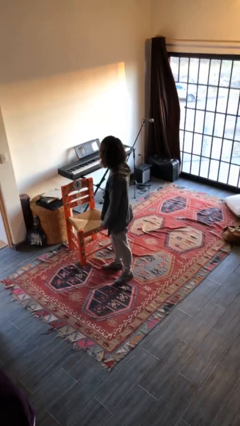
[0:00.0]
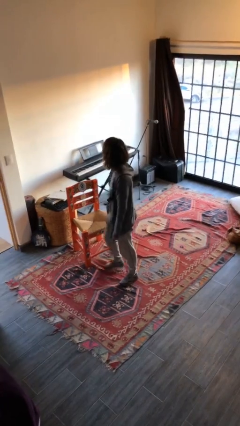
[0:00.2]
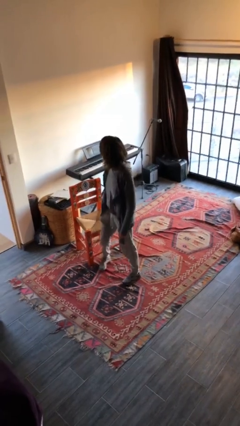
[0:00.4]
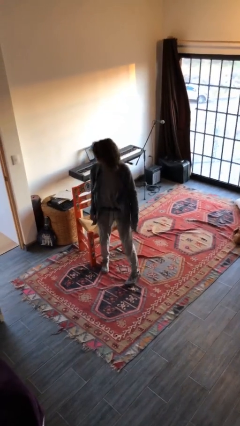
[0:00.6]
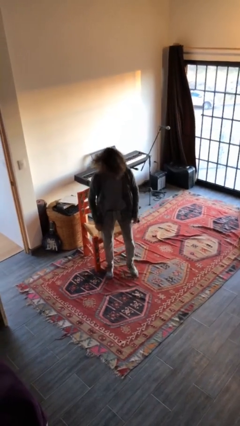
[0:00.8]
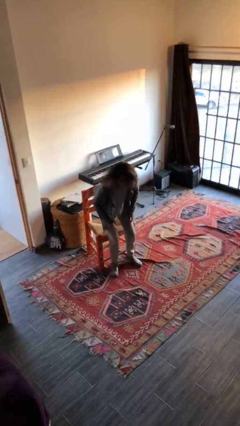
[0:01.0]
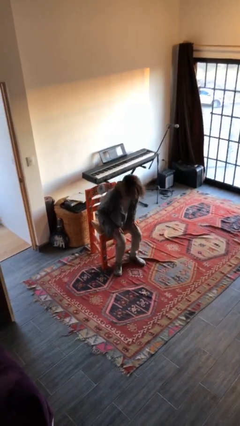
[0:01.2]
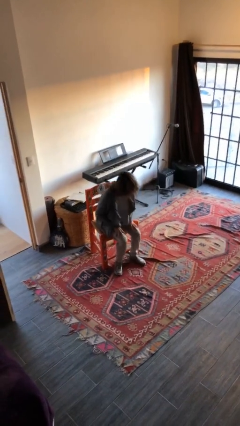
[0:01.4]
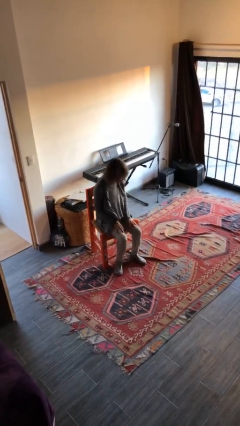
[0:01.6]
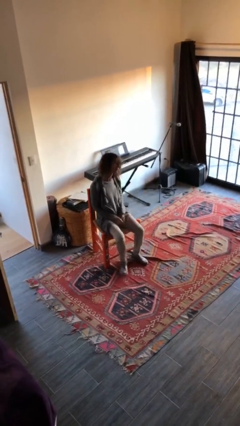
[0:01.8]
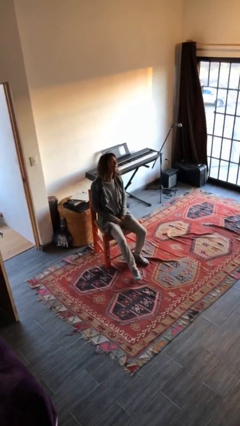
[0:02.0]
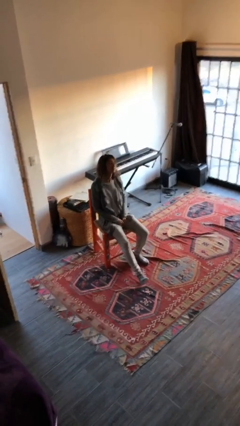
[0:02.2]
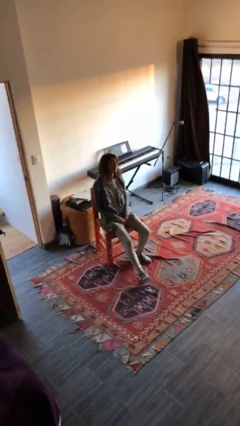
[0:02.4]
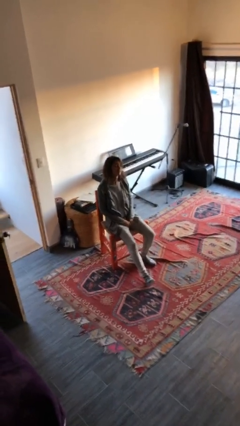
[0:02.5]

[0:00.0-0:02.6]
person sits down

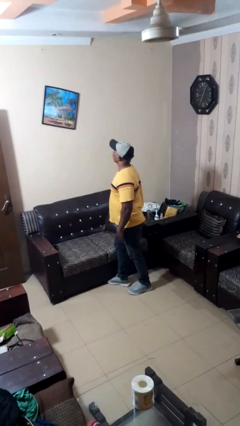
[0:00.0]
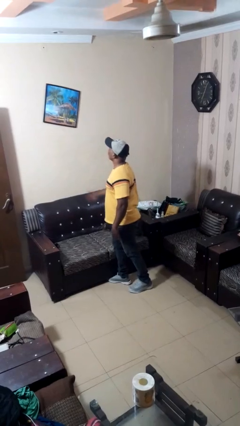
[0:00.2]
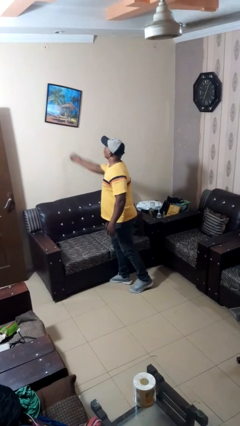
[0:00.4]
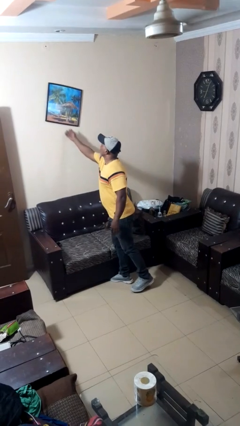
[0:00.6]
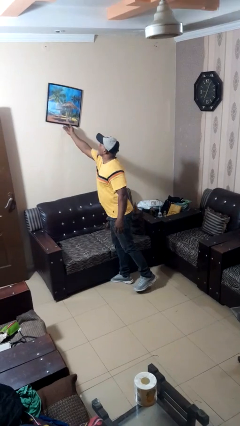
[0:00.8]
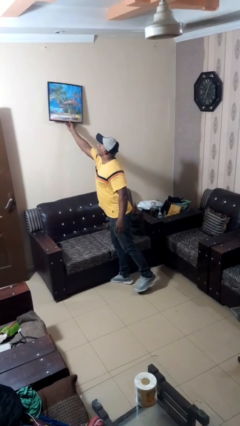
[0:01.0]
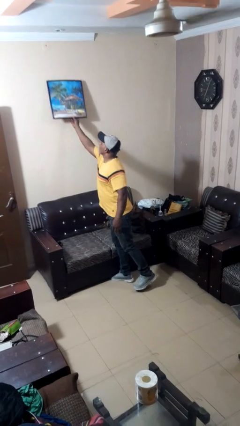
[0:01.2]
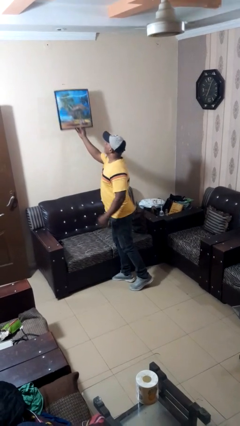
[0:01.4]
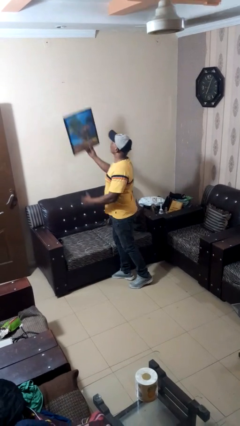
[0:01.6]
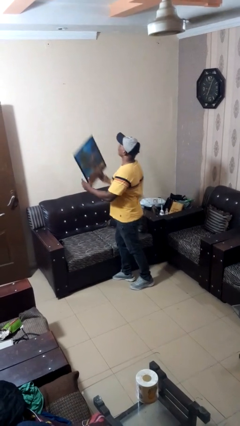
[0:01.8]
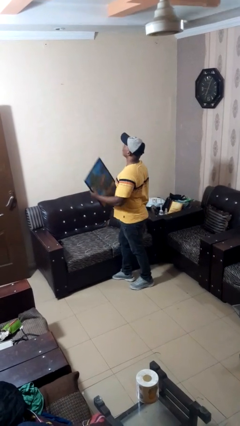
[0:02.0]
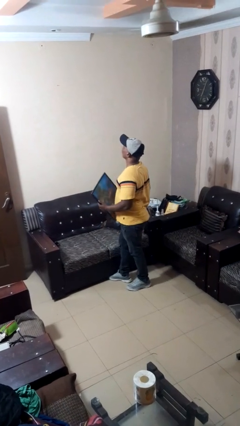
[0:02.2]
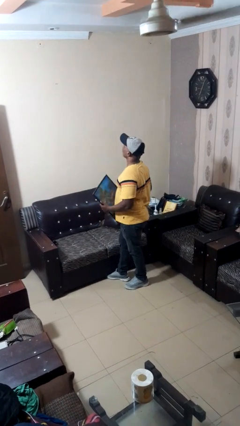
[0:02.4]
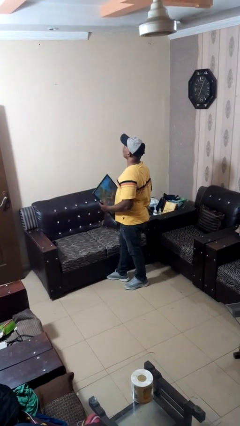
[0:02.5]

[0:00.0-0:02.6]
person takes down picture frame

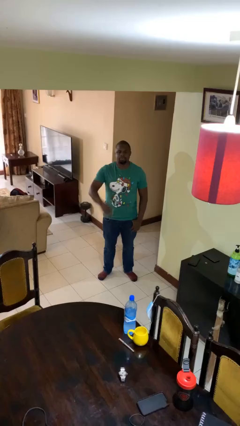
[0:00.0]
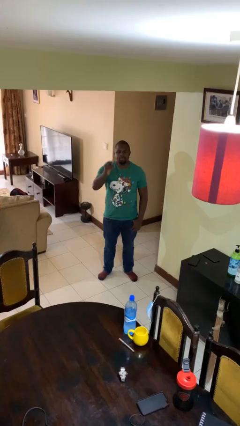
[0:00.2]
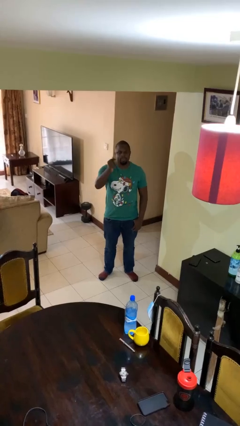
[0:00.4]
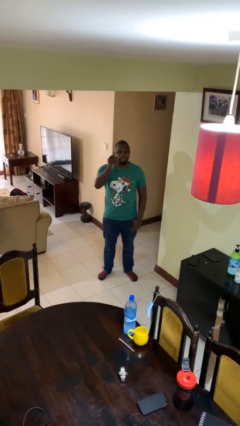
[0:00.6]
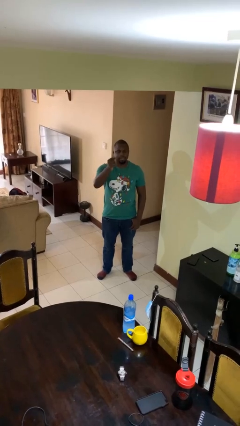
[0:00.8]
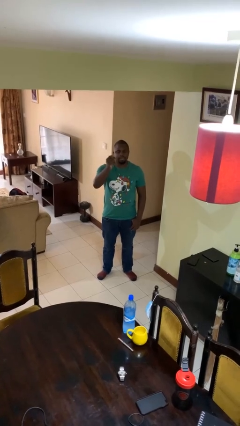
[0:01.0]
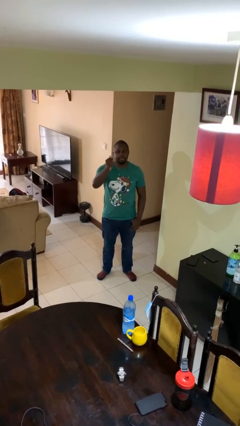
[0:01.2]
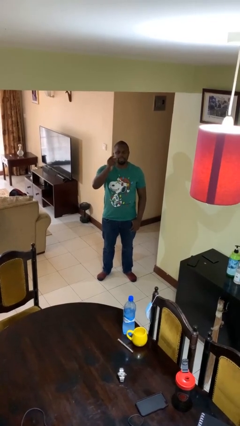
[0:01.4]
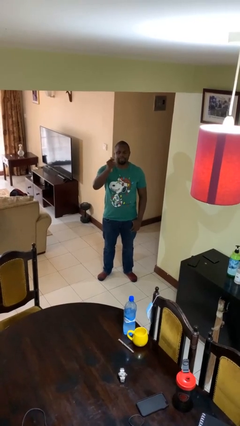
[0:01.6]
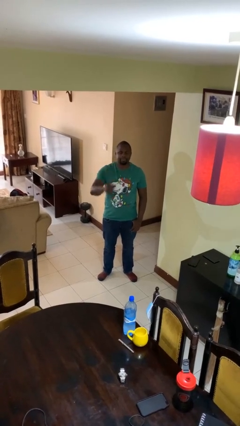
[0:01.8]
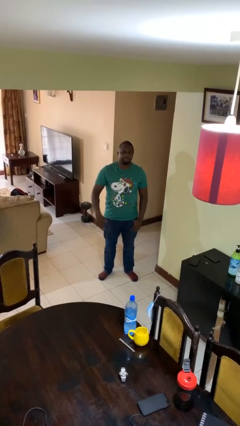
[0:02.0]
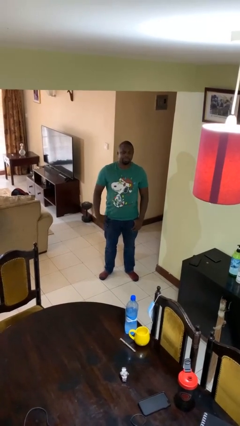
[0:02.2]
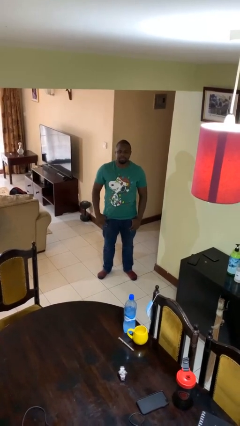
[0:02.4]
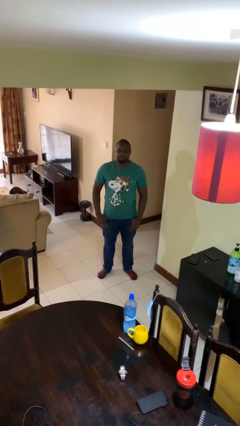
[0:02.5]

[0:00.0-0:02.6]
person snaps fingers

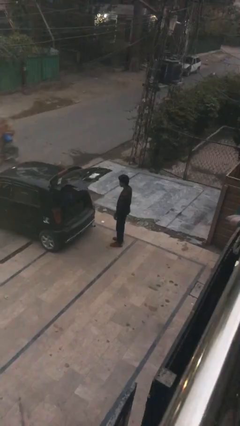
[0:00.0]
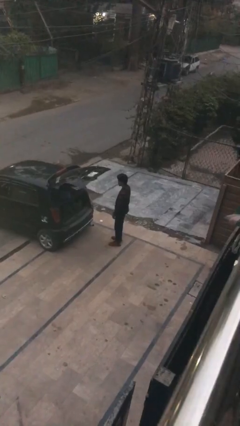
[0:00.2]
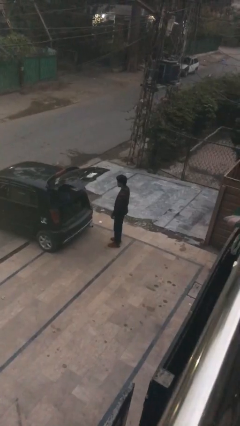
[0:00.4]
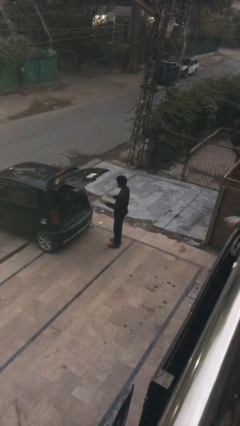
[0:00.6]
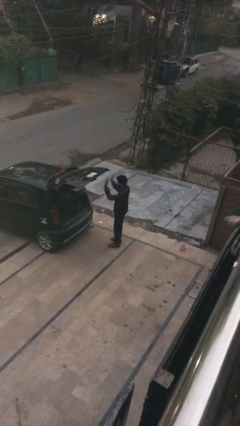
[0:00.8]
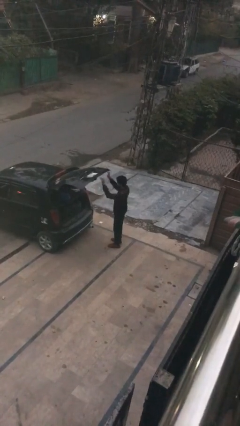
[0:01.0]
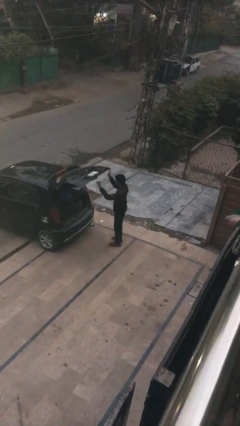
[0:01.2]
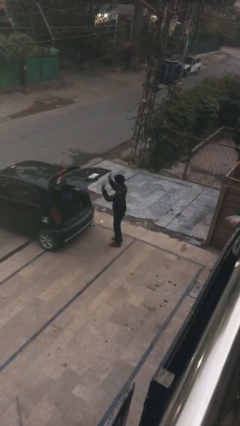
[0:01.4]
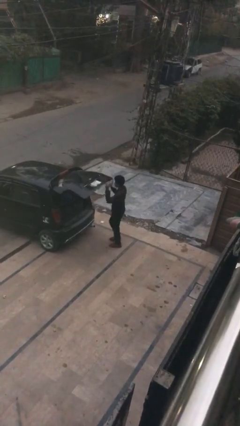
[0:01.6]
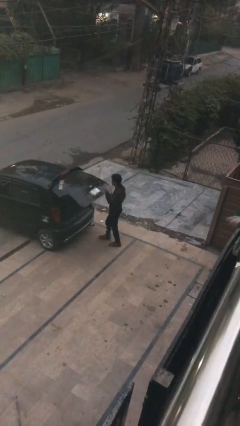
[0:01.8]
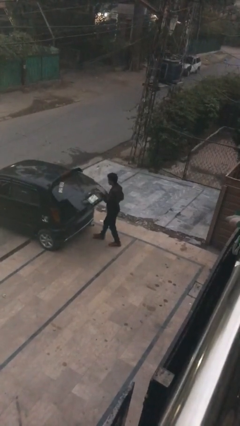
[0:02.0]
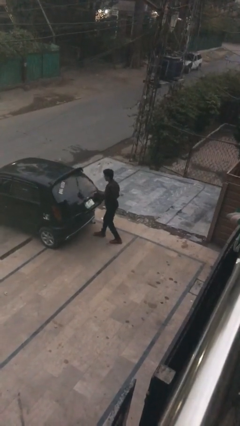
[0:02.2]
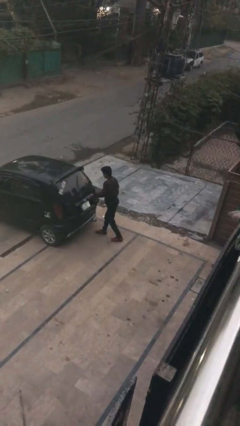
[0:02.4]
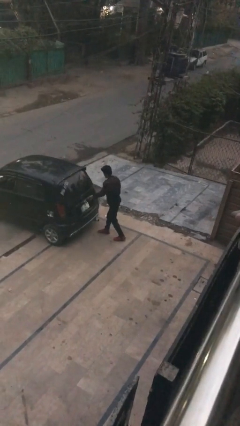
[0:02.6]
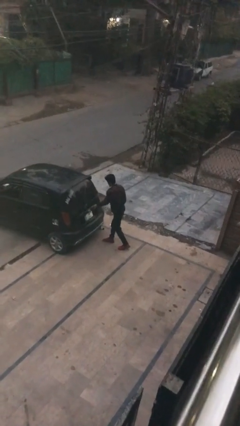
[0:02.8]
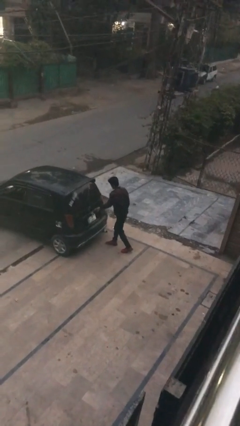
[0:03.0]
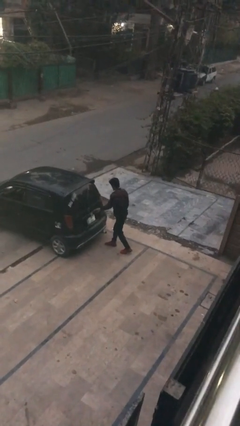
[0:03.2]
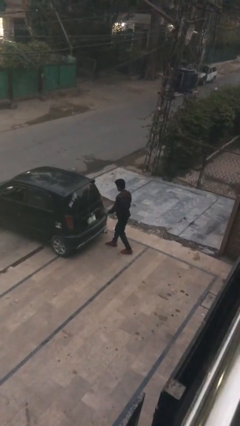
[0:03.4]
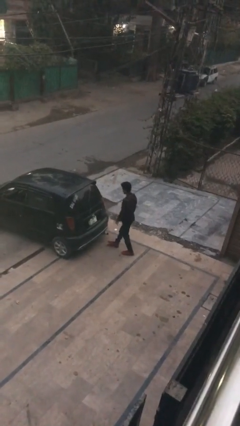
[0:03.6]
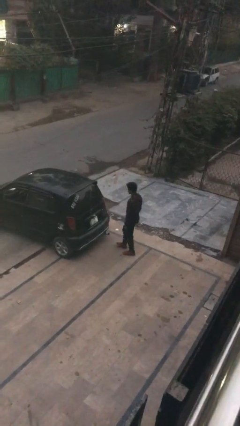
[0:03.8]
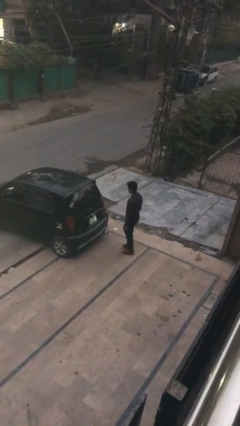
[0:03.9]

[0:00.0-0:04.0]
person closes car trunk

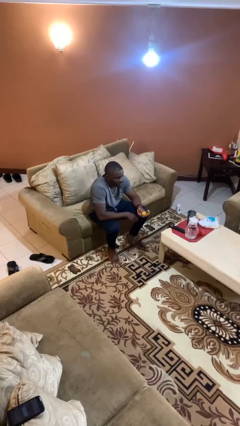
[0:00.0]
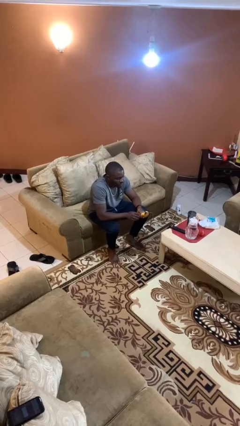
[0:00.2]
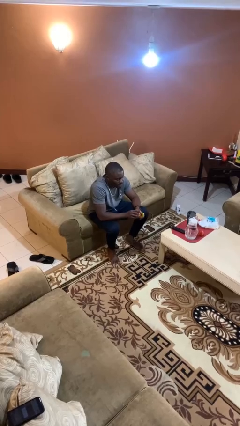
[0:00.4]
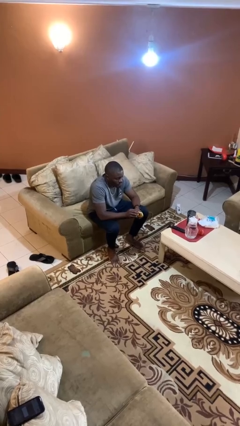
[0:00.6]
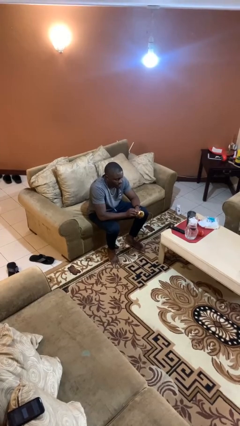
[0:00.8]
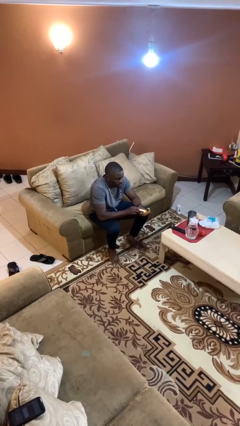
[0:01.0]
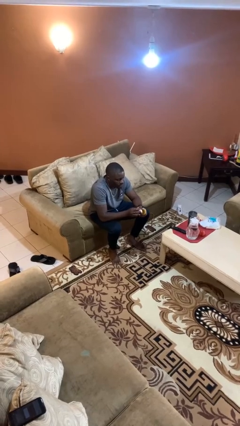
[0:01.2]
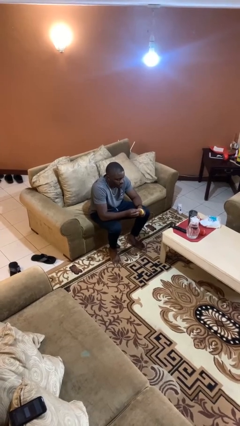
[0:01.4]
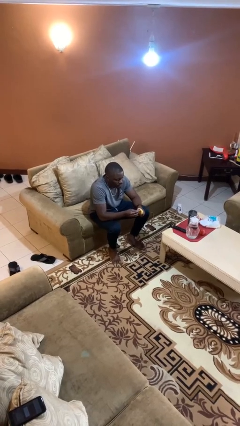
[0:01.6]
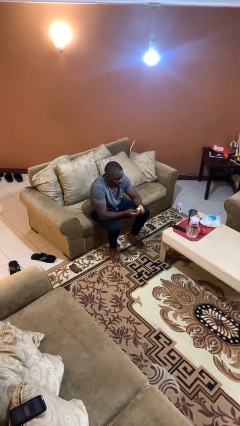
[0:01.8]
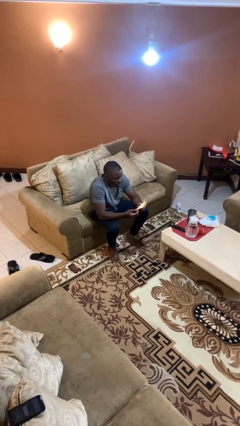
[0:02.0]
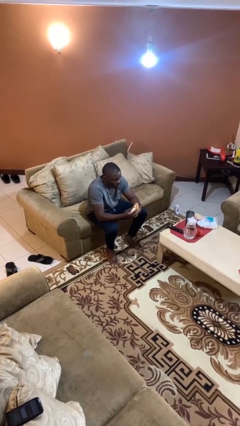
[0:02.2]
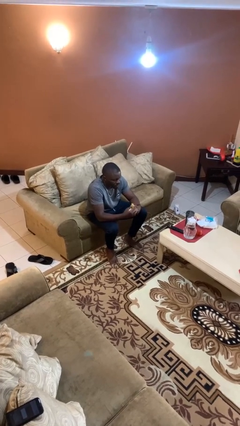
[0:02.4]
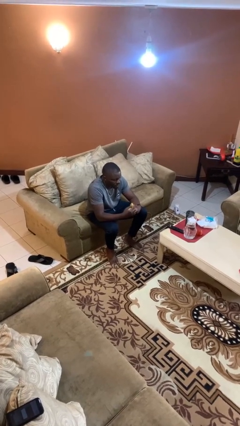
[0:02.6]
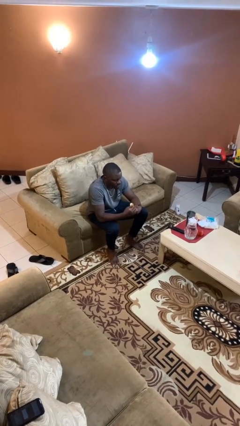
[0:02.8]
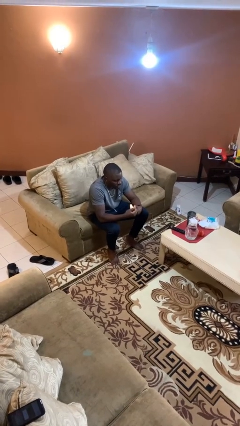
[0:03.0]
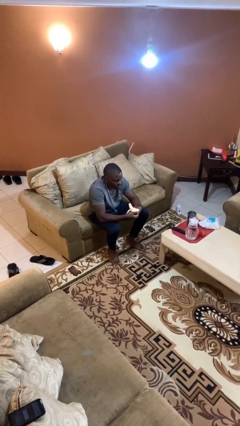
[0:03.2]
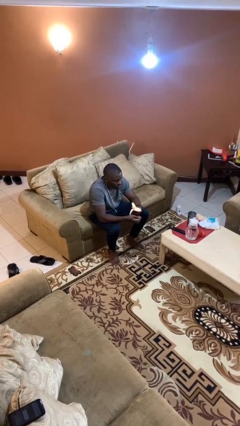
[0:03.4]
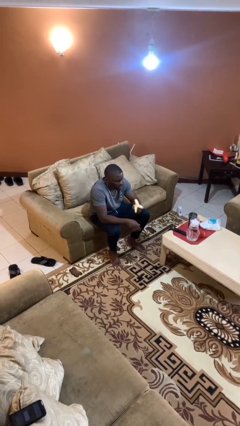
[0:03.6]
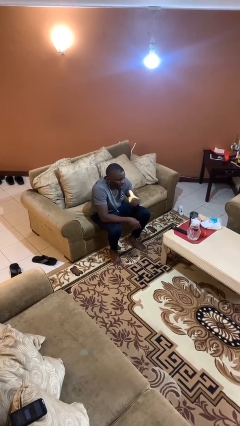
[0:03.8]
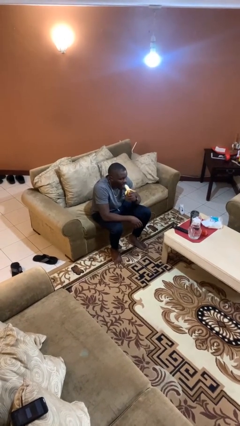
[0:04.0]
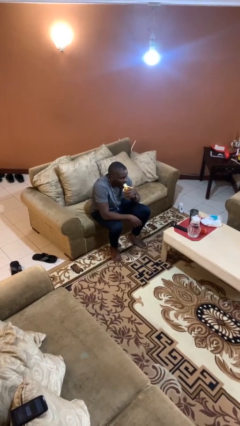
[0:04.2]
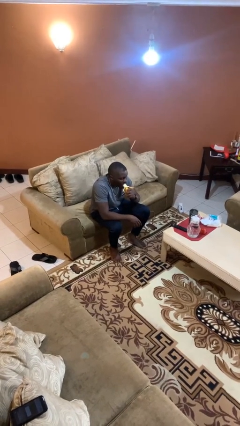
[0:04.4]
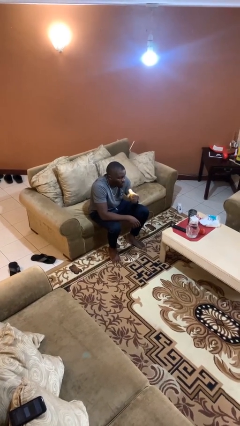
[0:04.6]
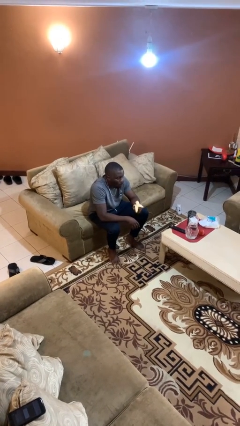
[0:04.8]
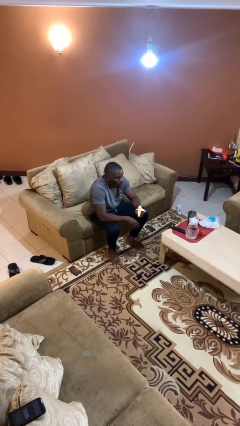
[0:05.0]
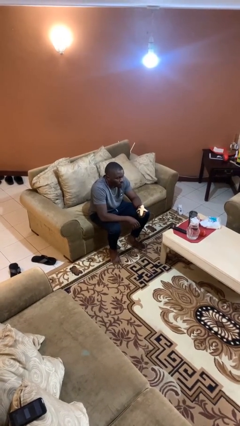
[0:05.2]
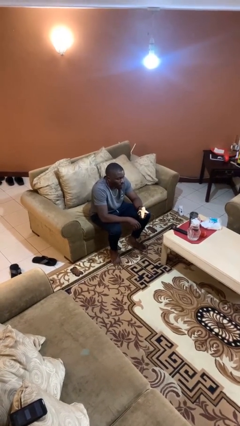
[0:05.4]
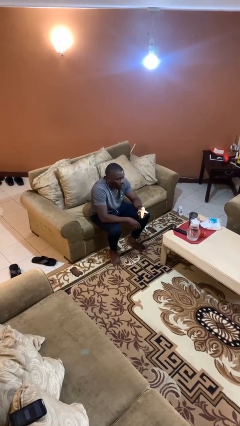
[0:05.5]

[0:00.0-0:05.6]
person eats banana
